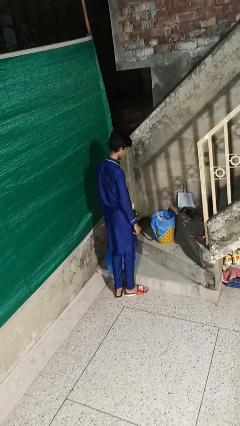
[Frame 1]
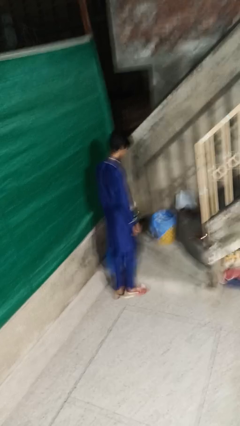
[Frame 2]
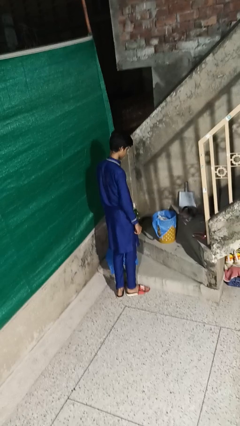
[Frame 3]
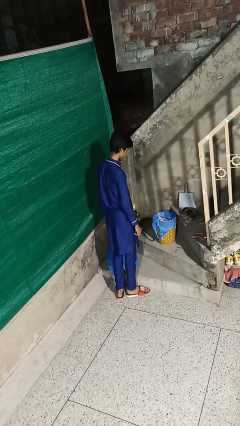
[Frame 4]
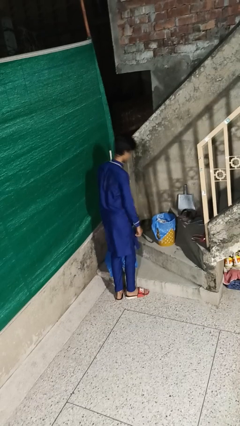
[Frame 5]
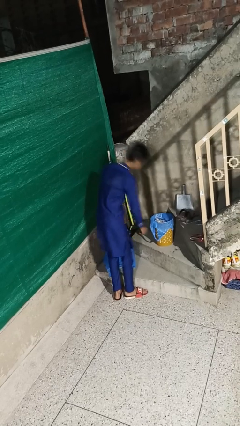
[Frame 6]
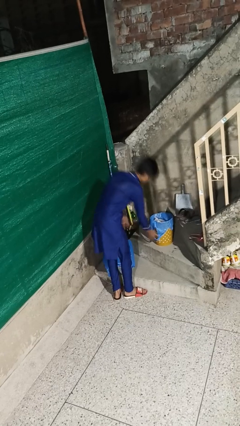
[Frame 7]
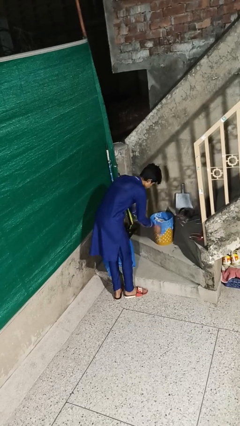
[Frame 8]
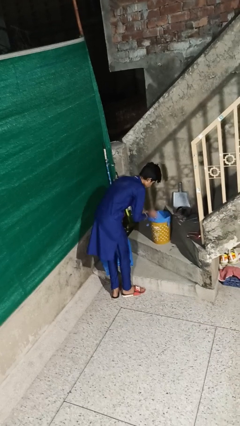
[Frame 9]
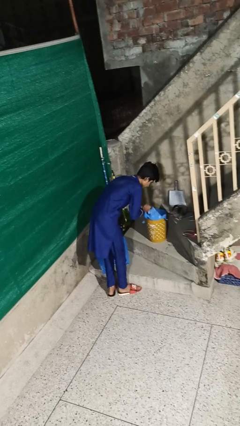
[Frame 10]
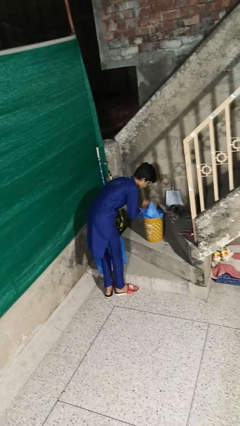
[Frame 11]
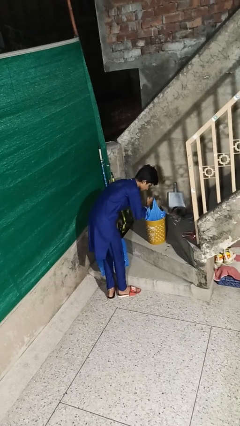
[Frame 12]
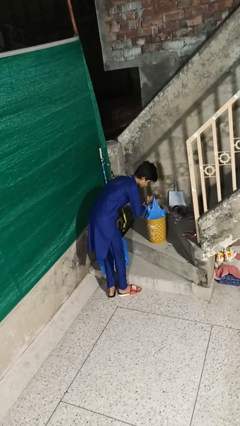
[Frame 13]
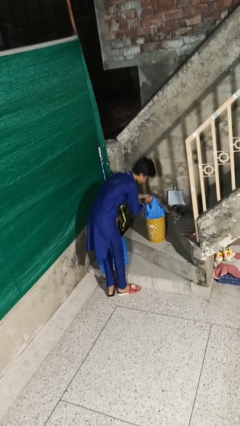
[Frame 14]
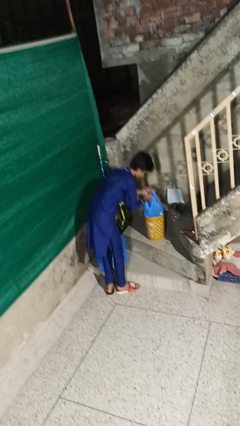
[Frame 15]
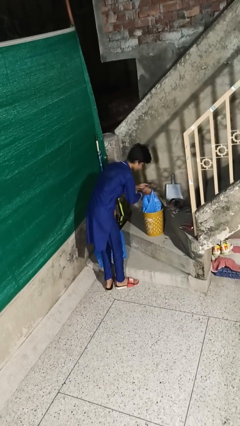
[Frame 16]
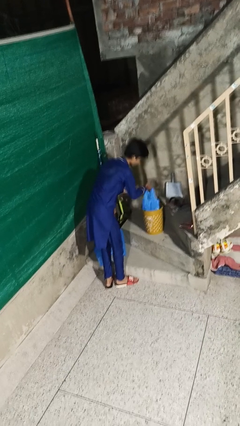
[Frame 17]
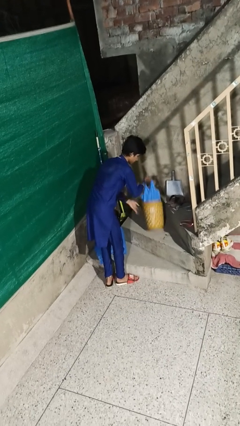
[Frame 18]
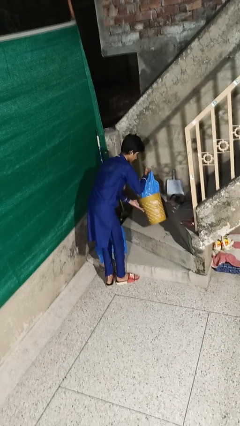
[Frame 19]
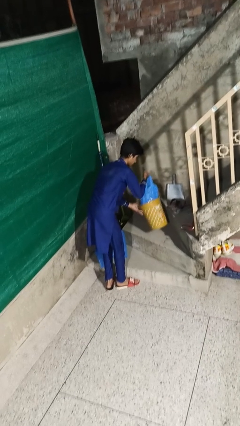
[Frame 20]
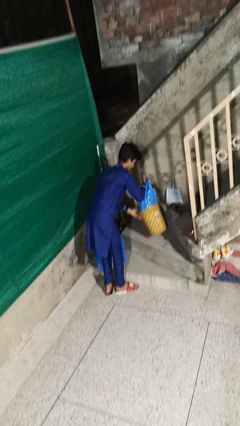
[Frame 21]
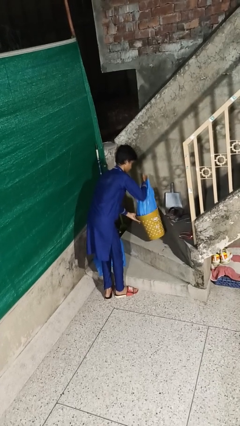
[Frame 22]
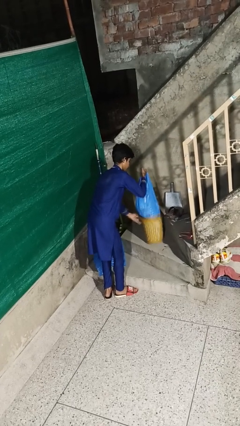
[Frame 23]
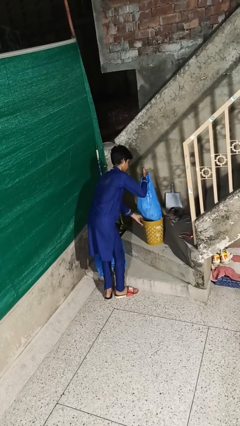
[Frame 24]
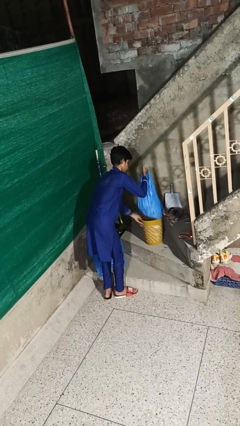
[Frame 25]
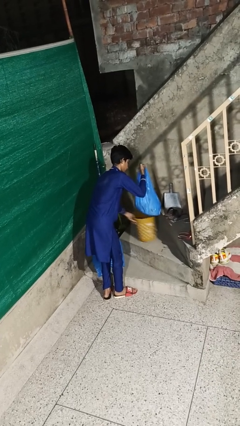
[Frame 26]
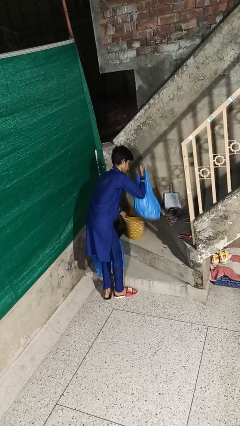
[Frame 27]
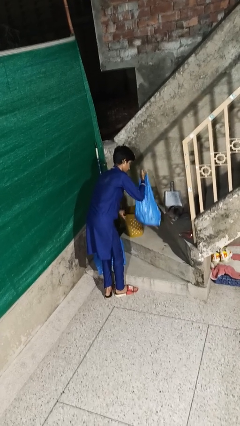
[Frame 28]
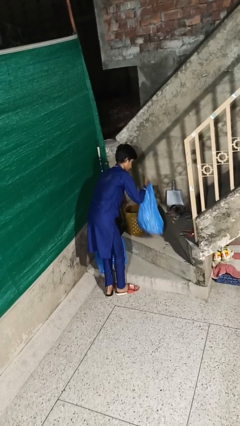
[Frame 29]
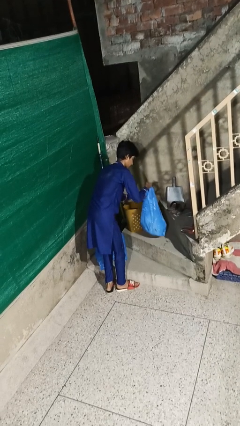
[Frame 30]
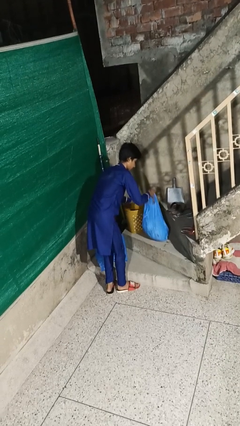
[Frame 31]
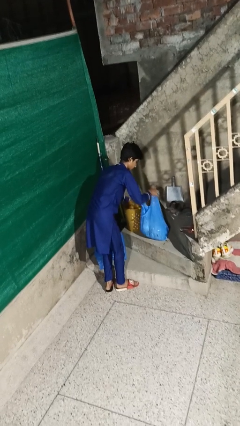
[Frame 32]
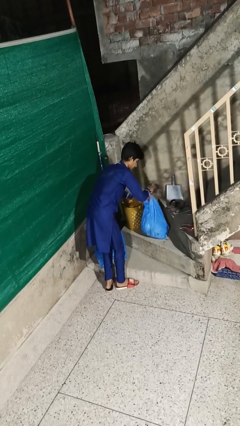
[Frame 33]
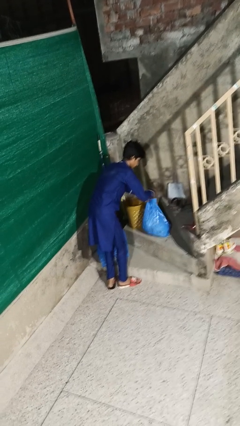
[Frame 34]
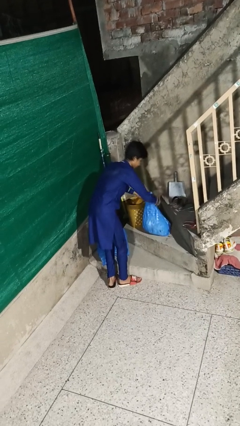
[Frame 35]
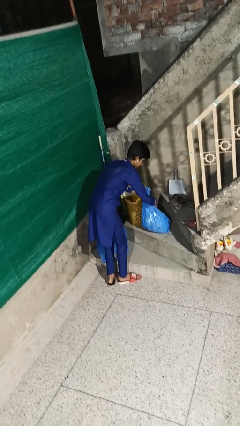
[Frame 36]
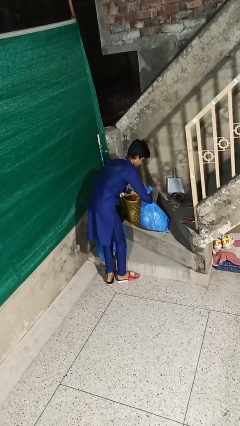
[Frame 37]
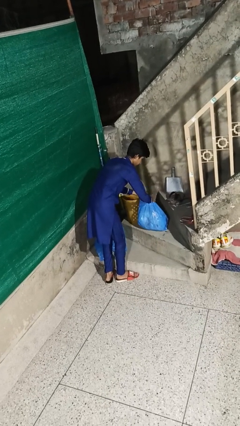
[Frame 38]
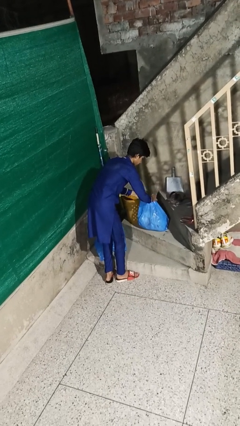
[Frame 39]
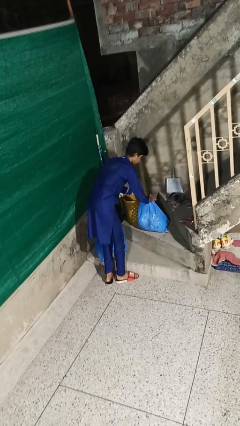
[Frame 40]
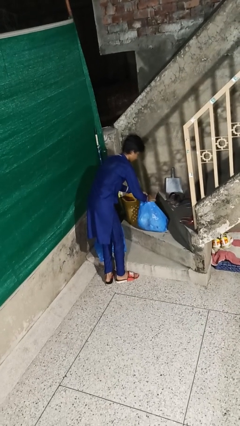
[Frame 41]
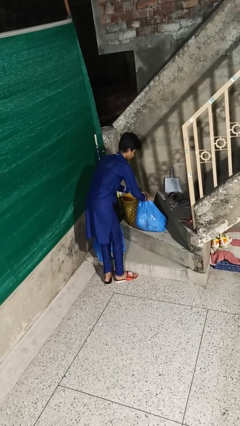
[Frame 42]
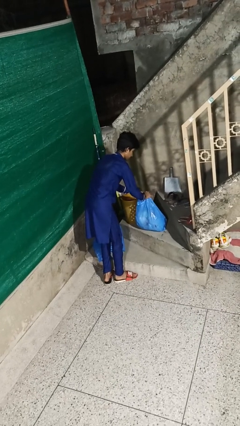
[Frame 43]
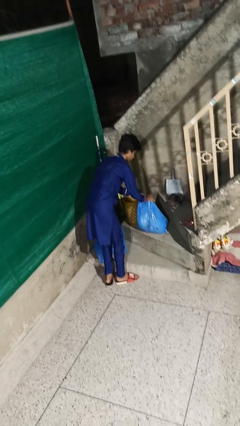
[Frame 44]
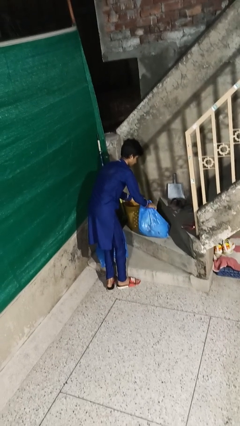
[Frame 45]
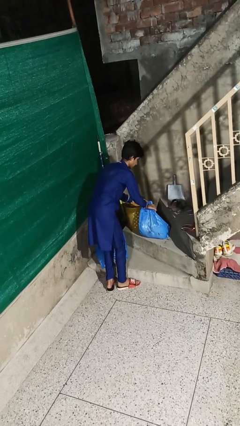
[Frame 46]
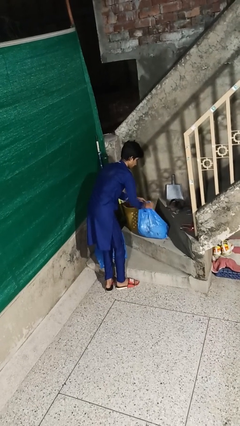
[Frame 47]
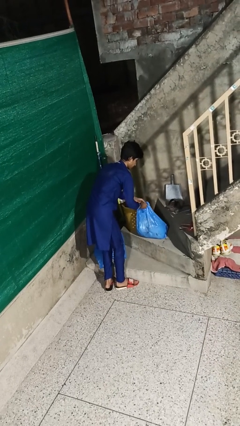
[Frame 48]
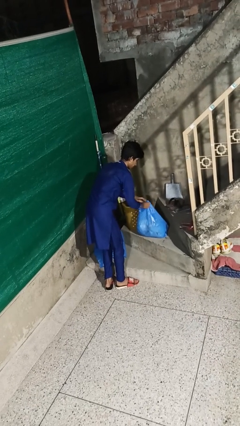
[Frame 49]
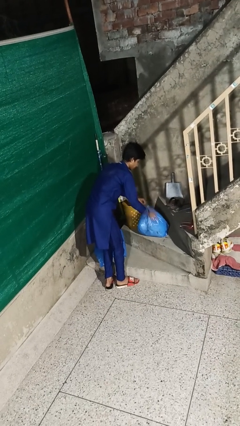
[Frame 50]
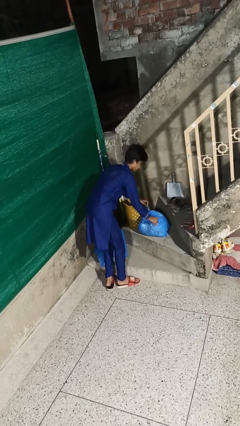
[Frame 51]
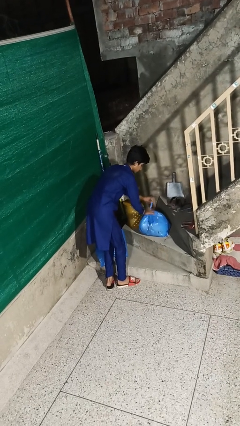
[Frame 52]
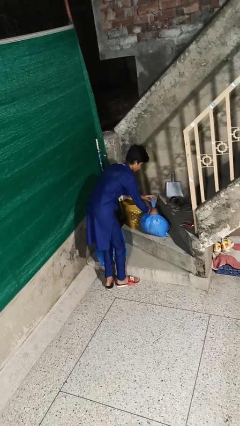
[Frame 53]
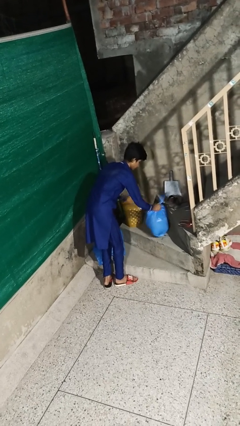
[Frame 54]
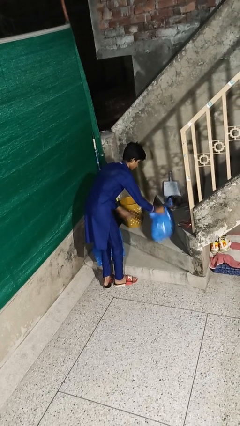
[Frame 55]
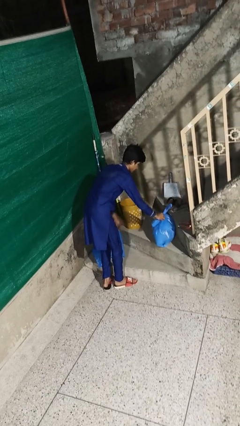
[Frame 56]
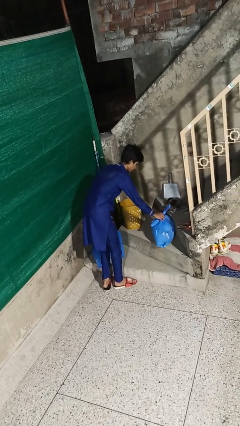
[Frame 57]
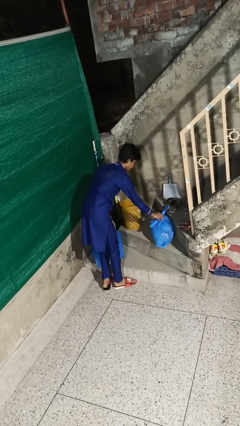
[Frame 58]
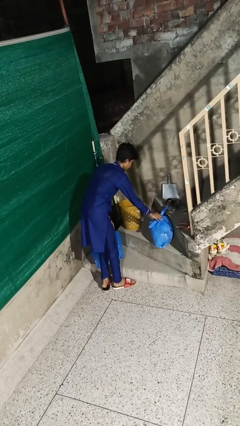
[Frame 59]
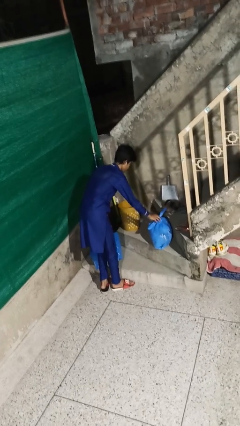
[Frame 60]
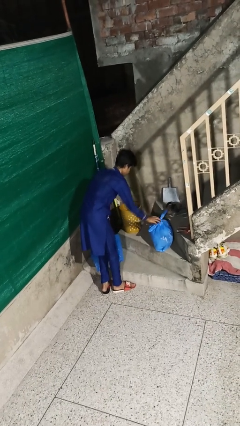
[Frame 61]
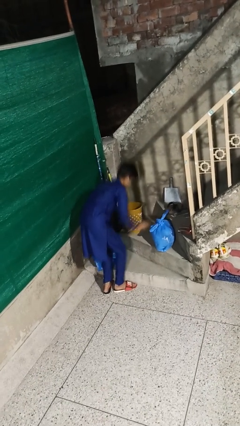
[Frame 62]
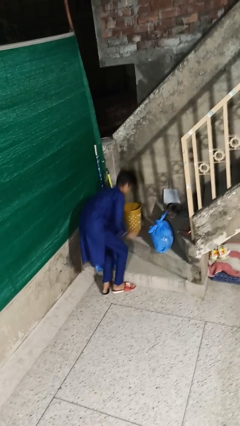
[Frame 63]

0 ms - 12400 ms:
person removes trashbag from trashcan

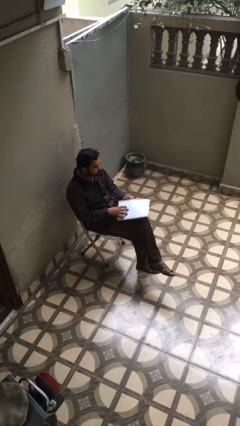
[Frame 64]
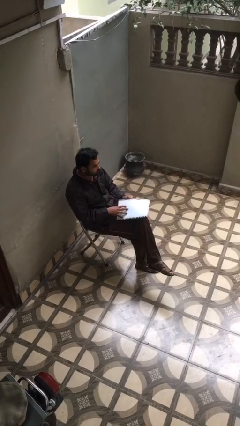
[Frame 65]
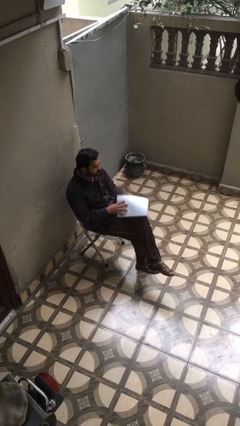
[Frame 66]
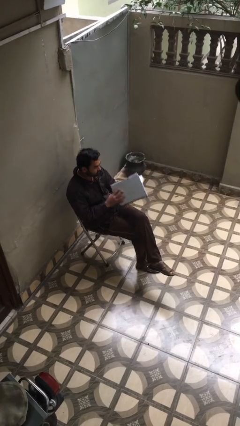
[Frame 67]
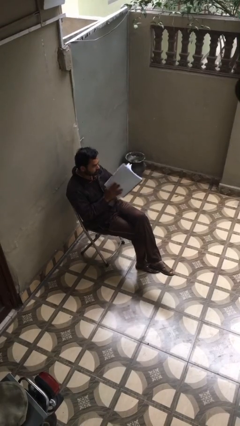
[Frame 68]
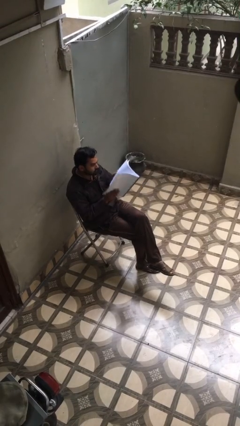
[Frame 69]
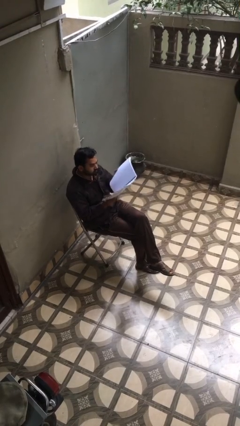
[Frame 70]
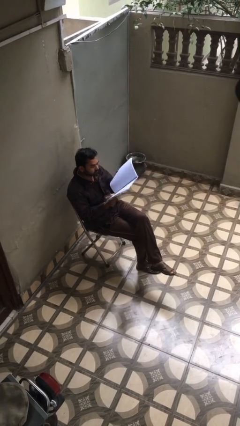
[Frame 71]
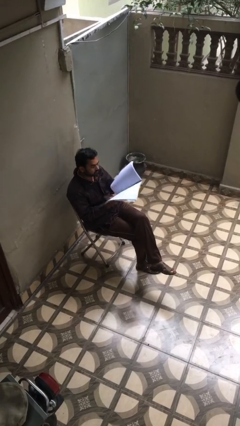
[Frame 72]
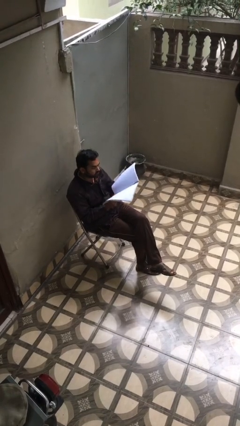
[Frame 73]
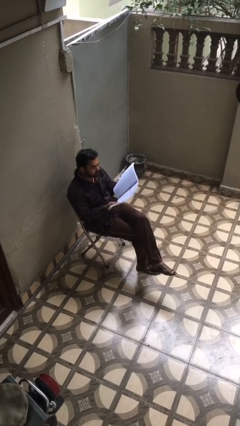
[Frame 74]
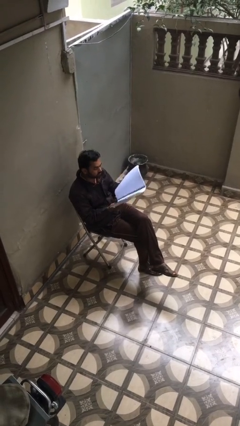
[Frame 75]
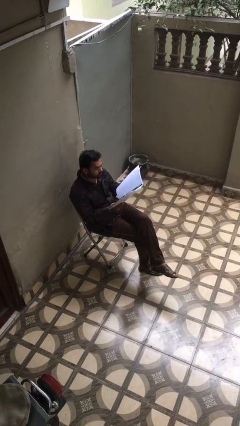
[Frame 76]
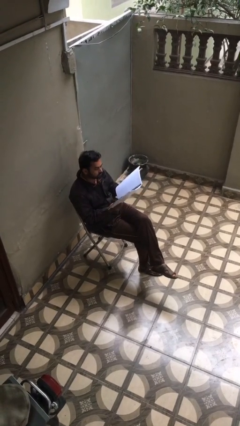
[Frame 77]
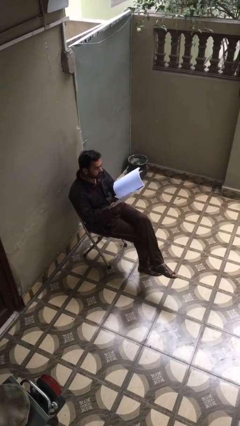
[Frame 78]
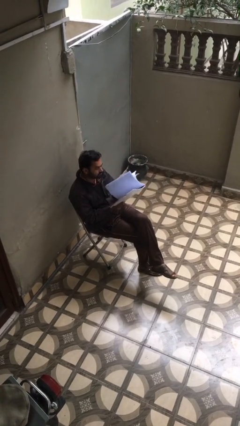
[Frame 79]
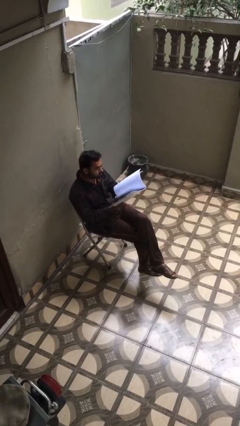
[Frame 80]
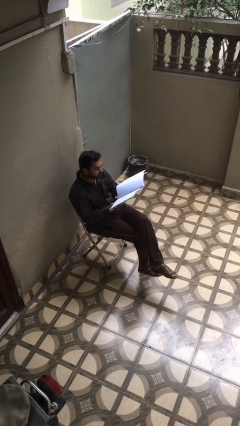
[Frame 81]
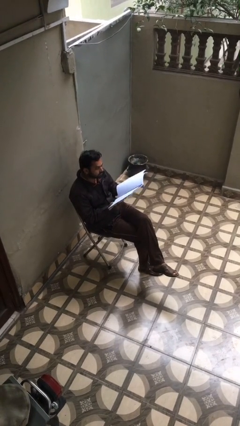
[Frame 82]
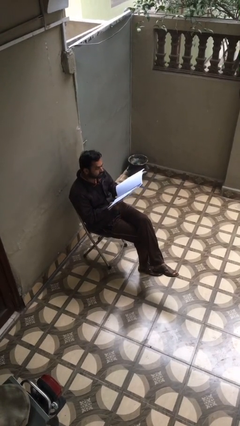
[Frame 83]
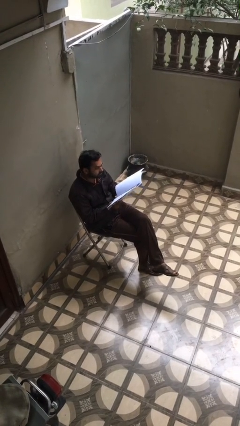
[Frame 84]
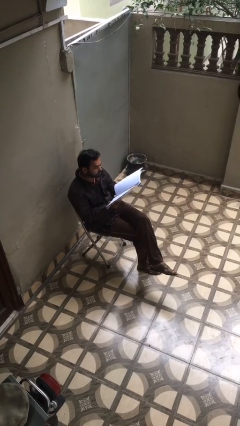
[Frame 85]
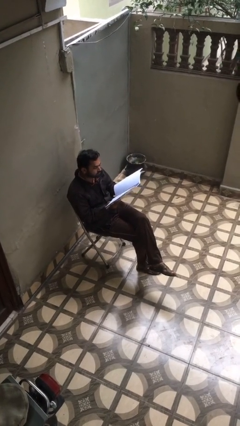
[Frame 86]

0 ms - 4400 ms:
person reads document

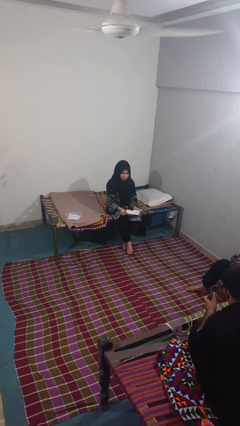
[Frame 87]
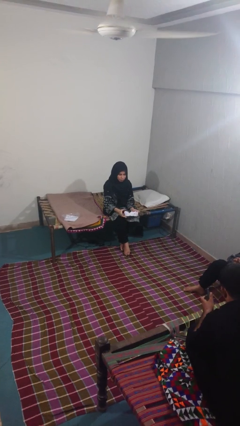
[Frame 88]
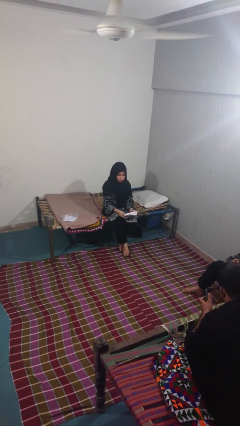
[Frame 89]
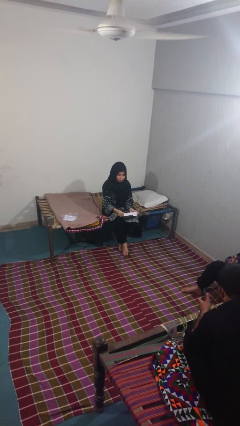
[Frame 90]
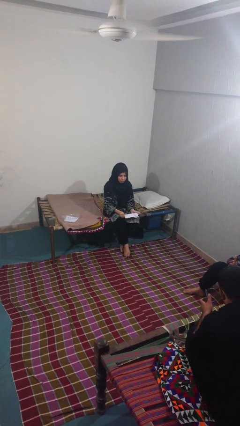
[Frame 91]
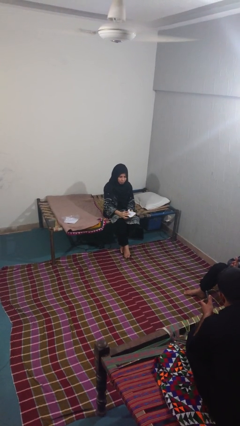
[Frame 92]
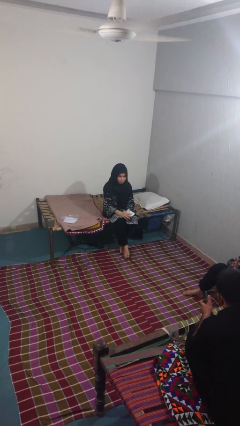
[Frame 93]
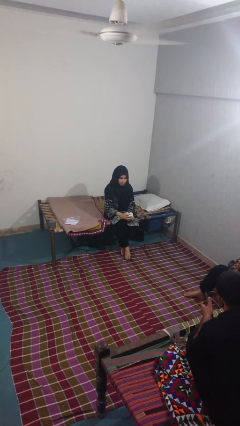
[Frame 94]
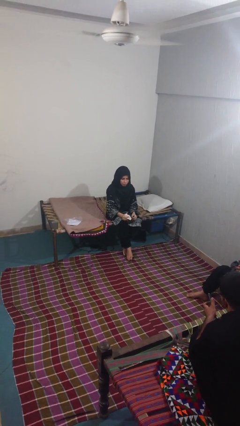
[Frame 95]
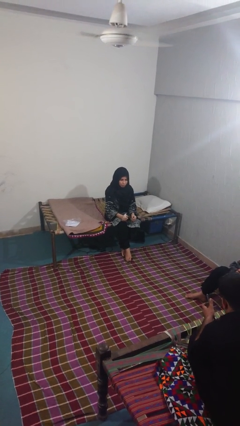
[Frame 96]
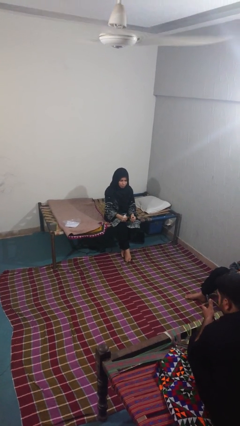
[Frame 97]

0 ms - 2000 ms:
person crumples paper
